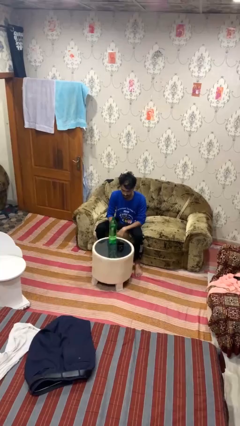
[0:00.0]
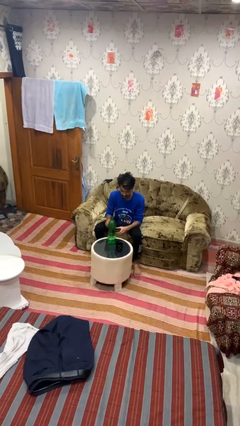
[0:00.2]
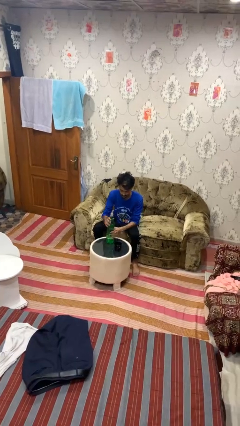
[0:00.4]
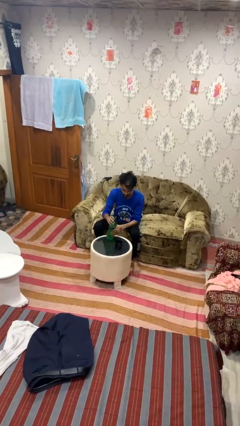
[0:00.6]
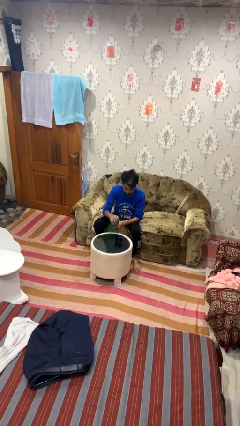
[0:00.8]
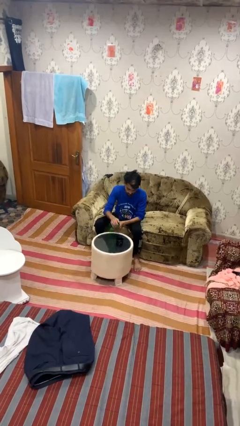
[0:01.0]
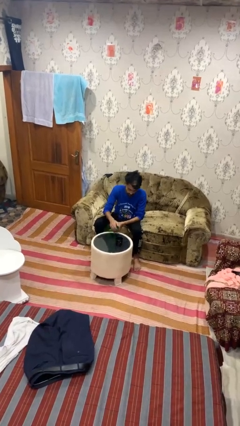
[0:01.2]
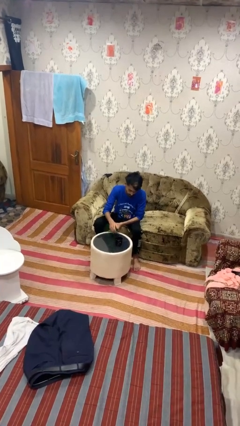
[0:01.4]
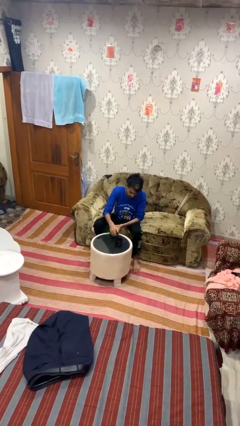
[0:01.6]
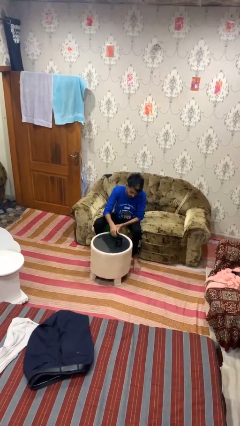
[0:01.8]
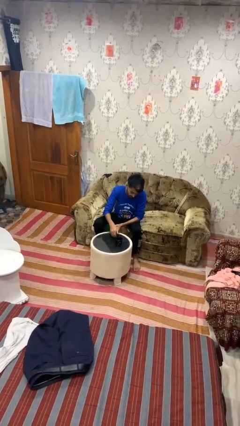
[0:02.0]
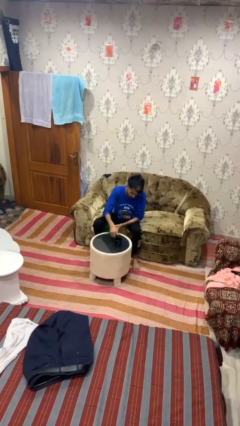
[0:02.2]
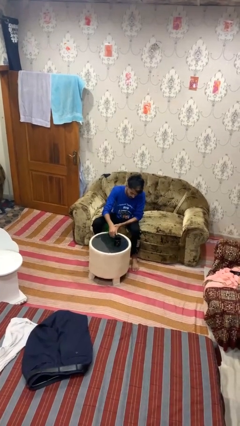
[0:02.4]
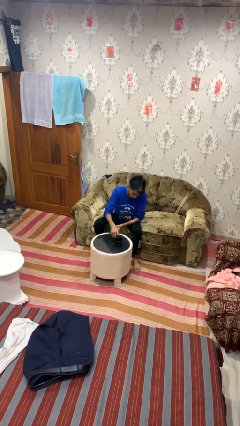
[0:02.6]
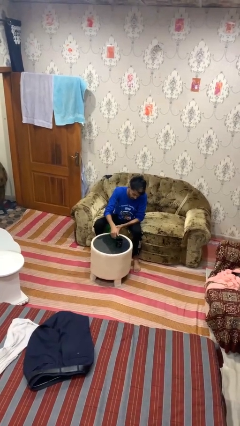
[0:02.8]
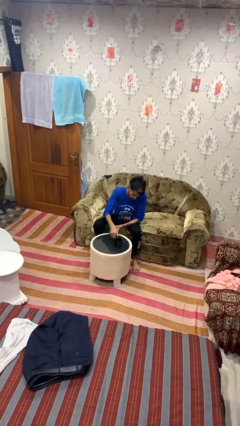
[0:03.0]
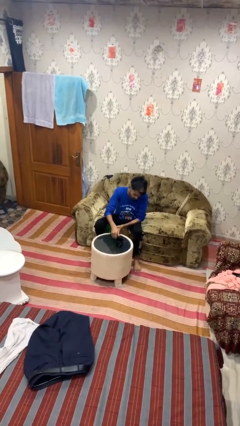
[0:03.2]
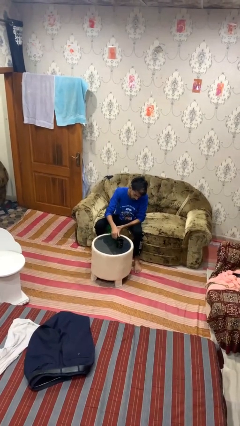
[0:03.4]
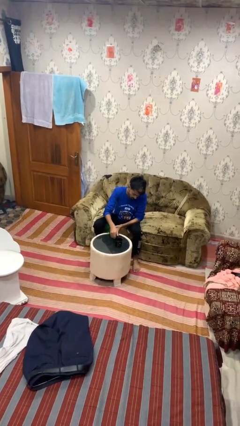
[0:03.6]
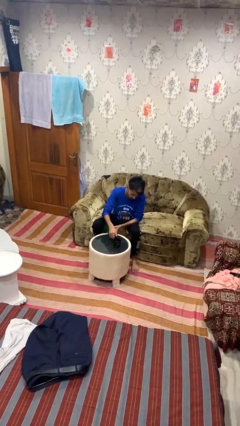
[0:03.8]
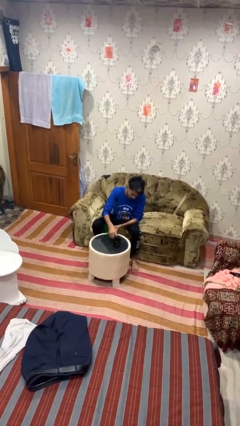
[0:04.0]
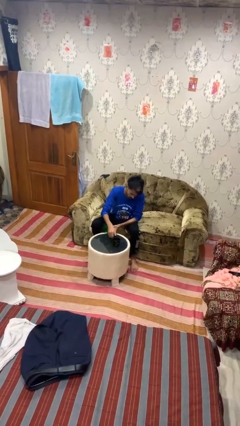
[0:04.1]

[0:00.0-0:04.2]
person pours liquid into cup

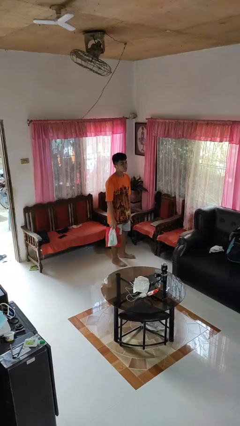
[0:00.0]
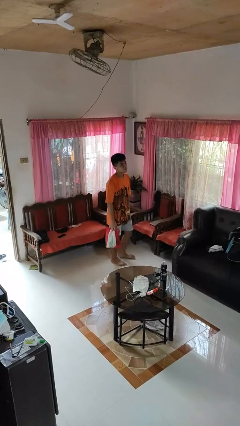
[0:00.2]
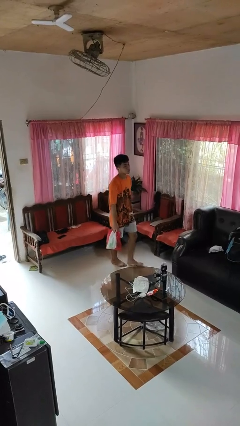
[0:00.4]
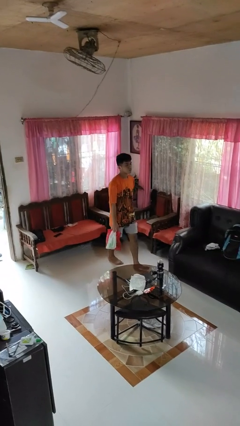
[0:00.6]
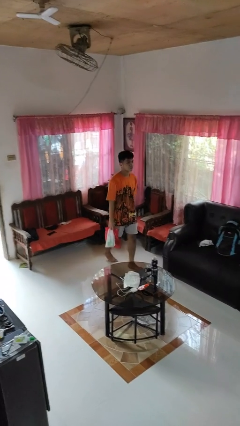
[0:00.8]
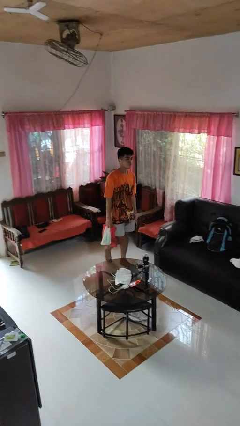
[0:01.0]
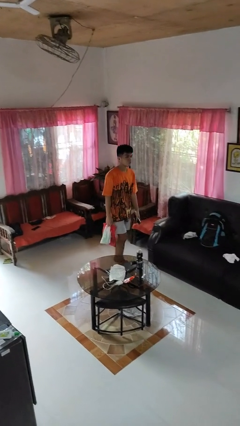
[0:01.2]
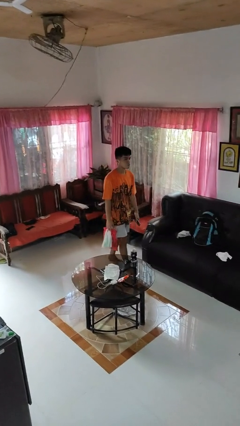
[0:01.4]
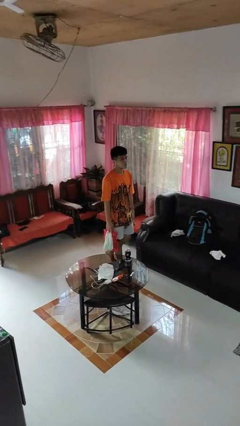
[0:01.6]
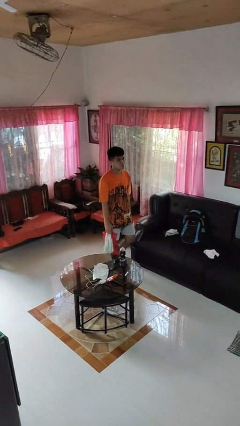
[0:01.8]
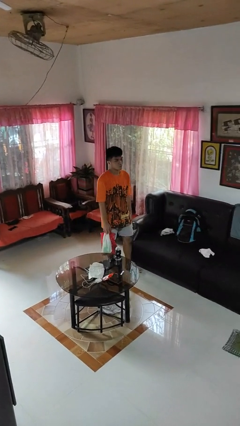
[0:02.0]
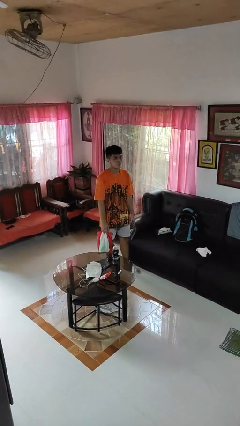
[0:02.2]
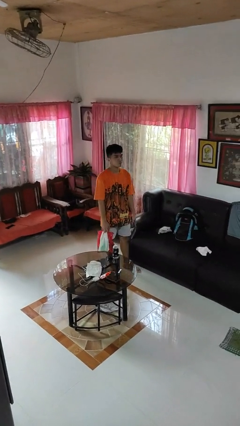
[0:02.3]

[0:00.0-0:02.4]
person carries groceries

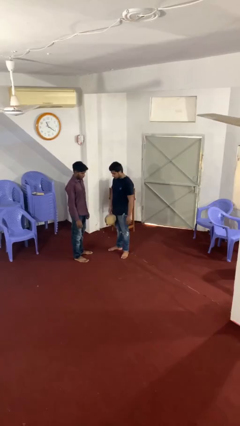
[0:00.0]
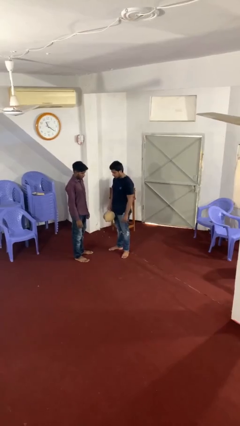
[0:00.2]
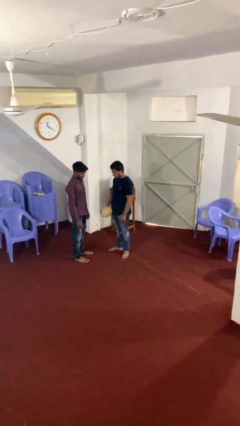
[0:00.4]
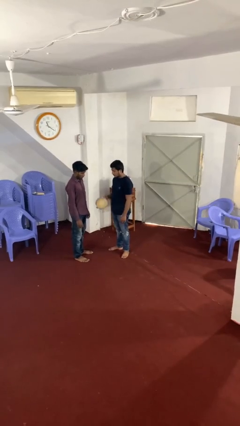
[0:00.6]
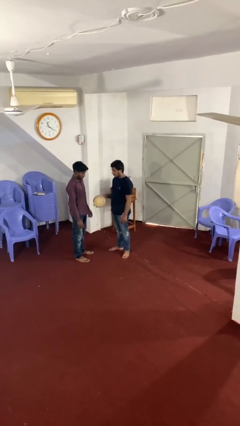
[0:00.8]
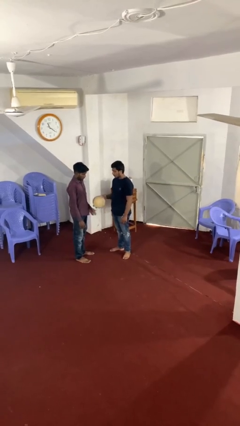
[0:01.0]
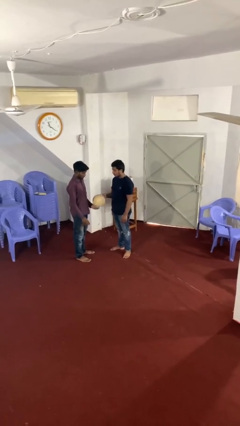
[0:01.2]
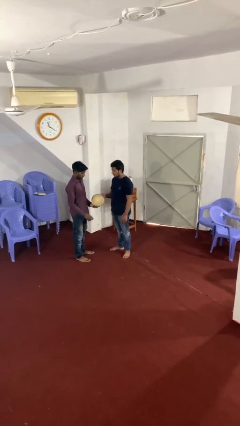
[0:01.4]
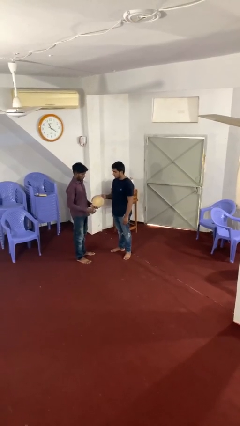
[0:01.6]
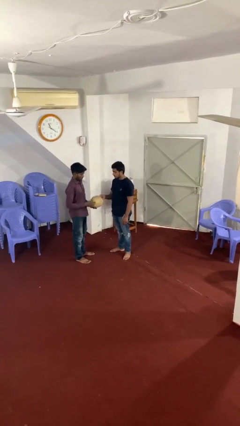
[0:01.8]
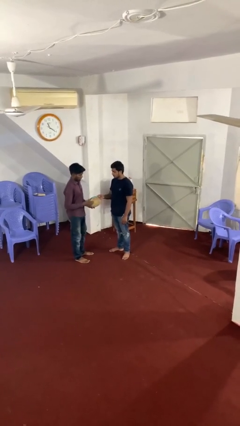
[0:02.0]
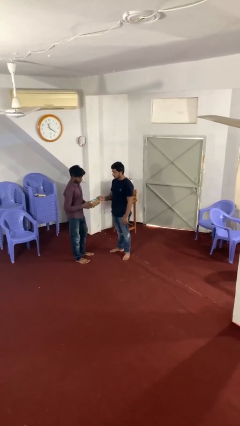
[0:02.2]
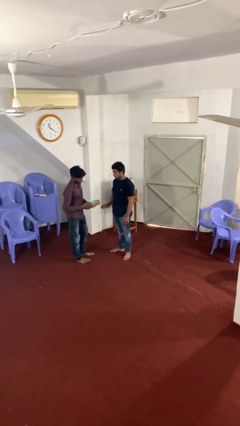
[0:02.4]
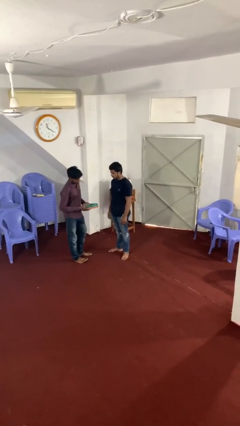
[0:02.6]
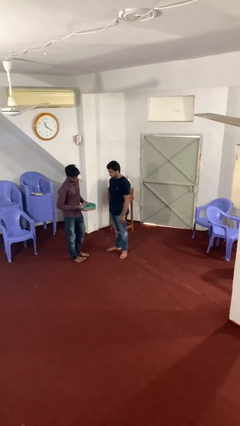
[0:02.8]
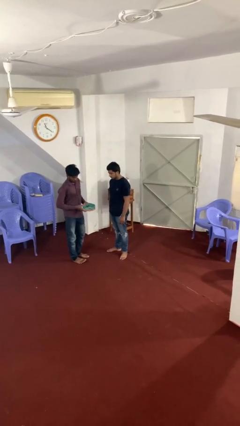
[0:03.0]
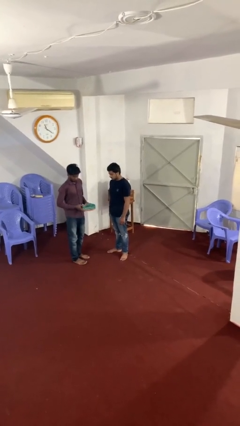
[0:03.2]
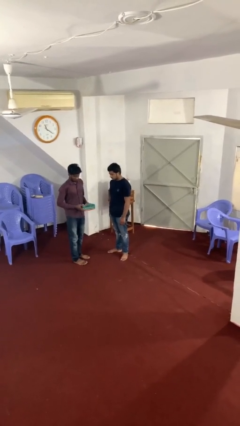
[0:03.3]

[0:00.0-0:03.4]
person transfers object to person

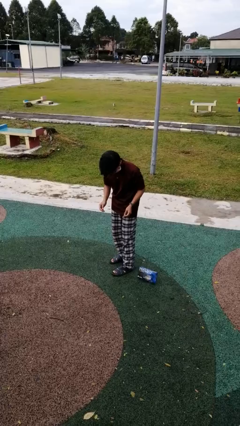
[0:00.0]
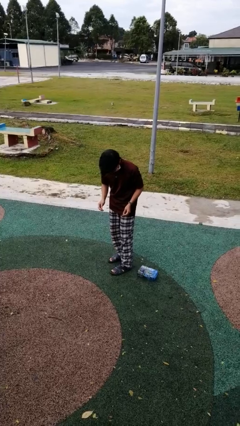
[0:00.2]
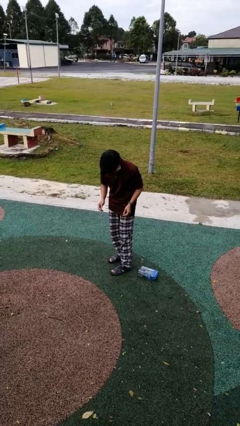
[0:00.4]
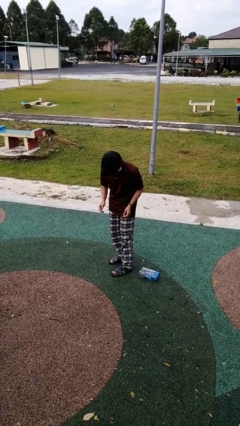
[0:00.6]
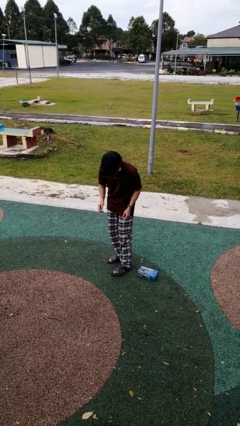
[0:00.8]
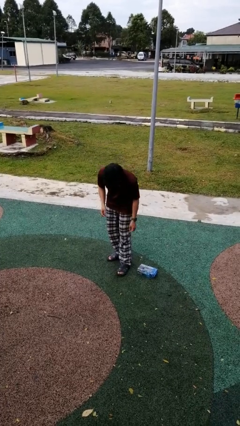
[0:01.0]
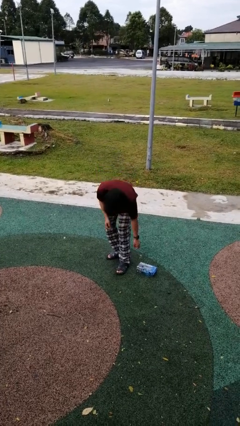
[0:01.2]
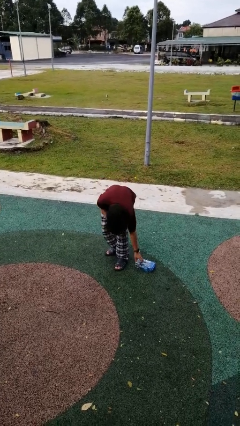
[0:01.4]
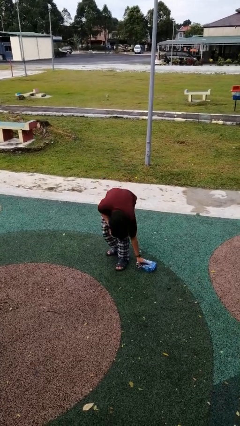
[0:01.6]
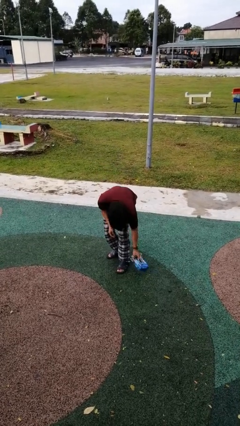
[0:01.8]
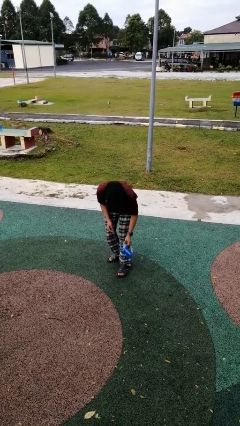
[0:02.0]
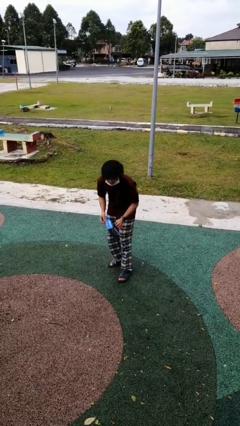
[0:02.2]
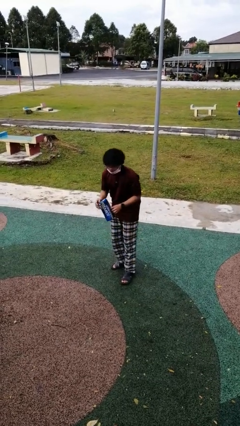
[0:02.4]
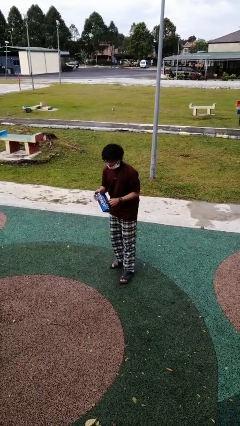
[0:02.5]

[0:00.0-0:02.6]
person picks up object from floor

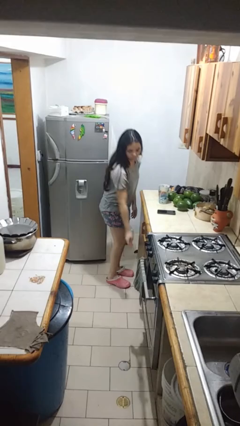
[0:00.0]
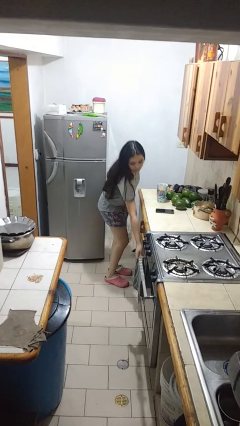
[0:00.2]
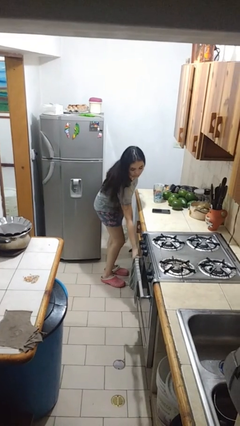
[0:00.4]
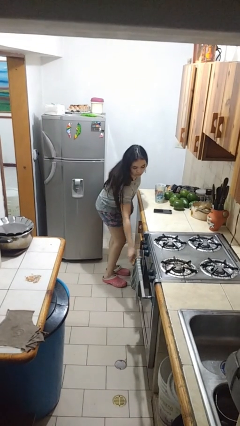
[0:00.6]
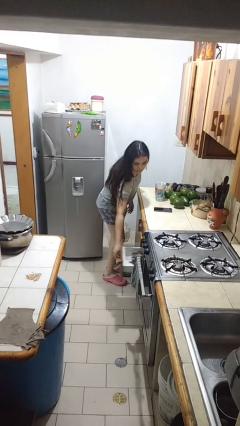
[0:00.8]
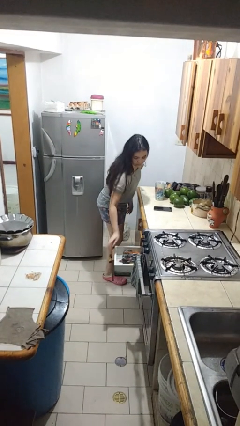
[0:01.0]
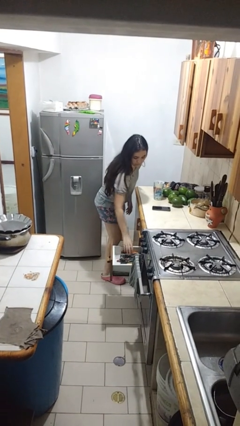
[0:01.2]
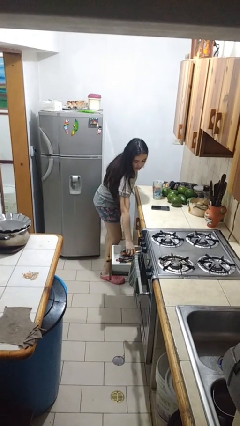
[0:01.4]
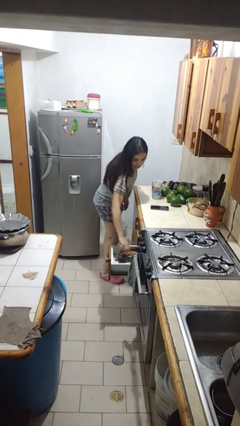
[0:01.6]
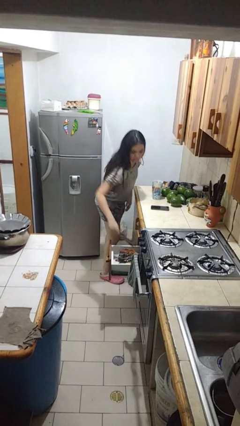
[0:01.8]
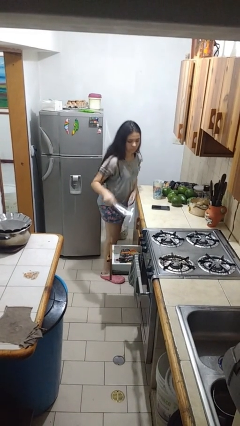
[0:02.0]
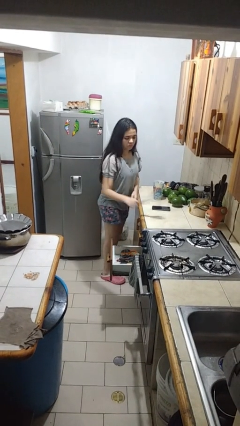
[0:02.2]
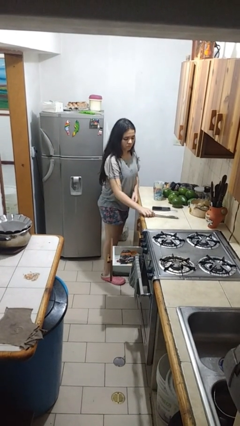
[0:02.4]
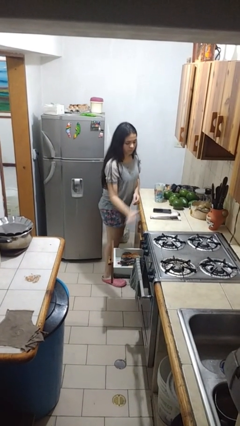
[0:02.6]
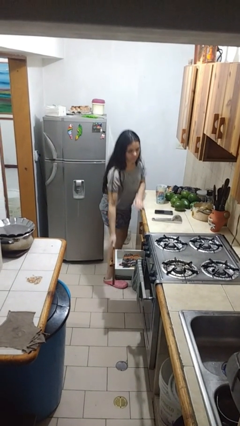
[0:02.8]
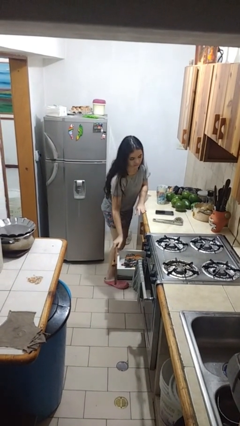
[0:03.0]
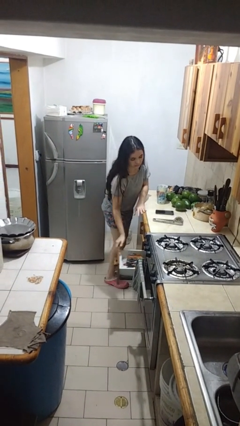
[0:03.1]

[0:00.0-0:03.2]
person takes object from kitchen drawer

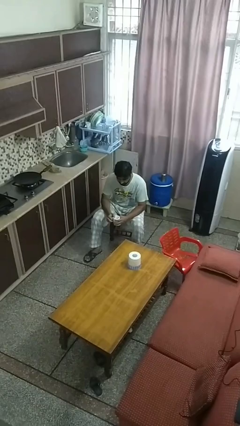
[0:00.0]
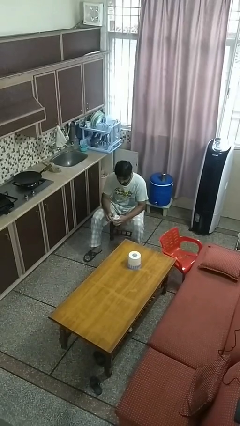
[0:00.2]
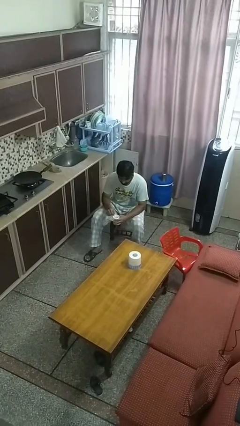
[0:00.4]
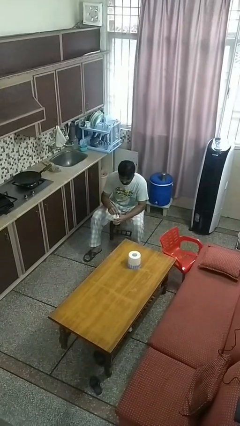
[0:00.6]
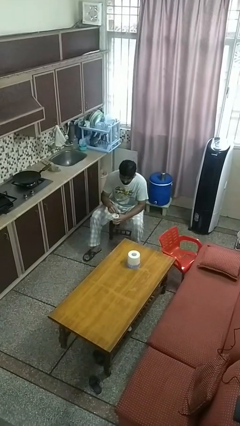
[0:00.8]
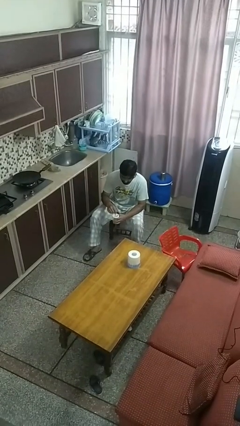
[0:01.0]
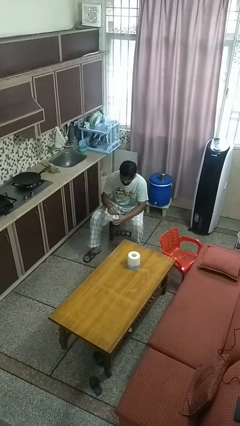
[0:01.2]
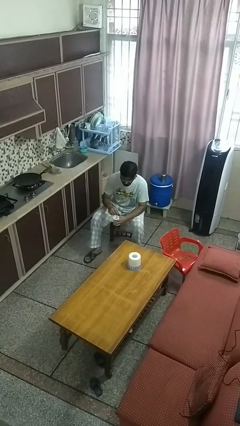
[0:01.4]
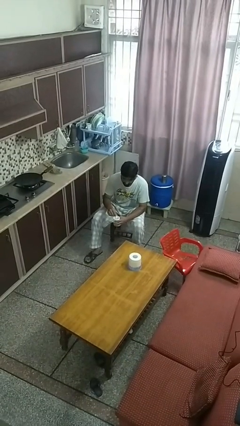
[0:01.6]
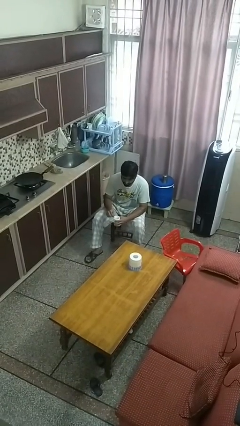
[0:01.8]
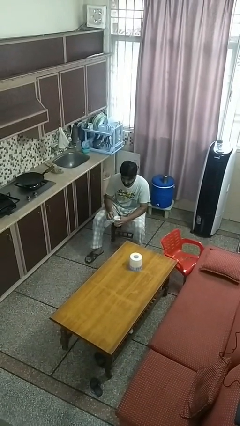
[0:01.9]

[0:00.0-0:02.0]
person stirs mug
